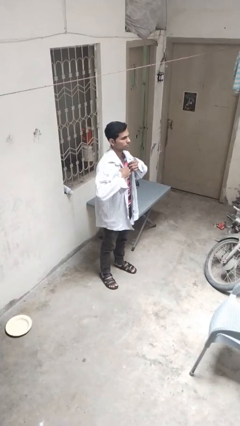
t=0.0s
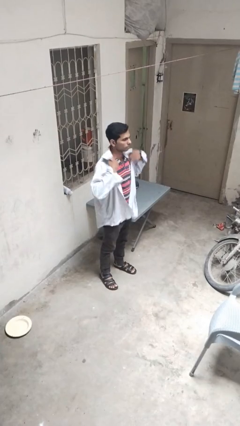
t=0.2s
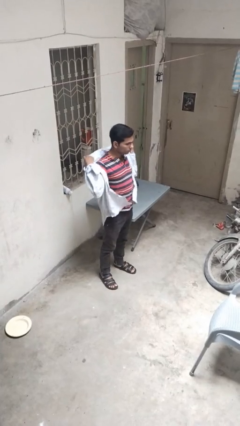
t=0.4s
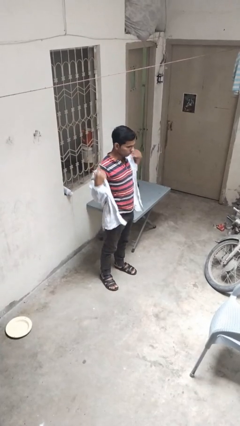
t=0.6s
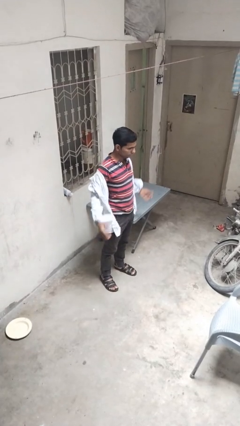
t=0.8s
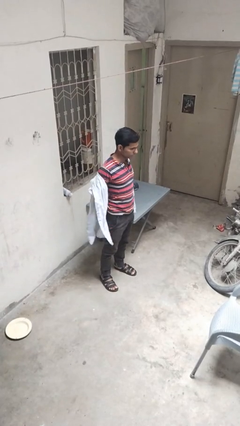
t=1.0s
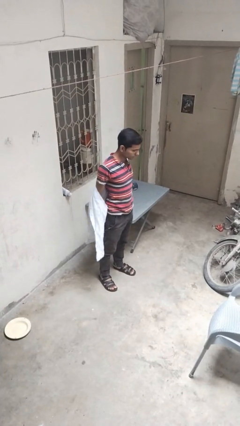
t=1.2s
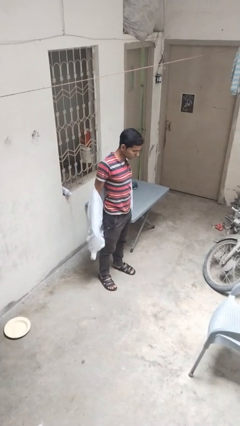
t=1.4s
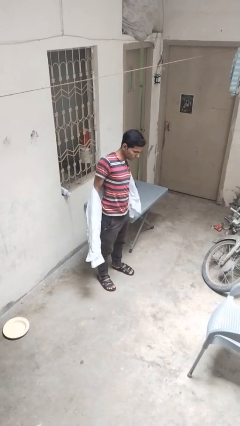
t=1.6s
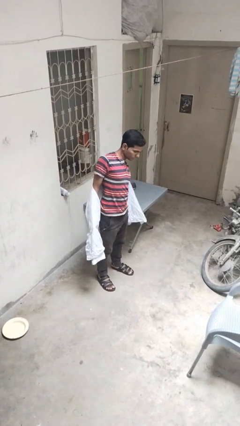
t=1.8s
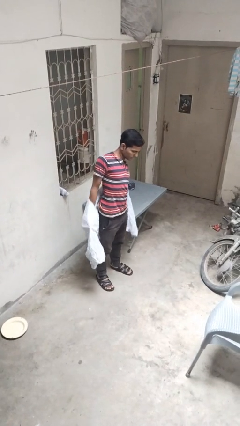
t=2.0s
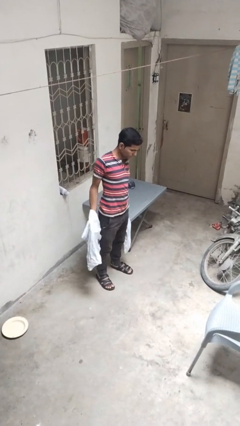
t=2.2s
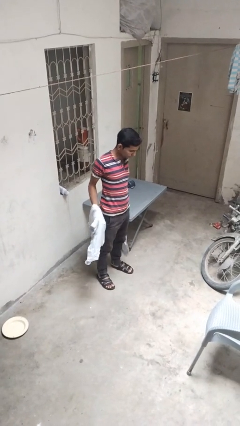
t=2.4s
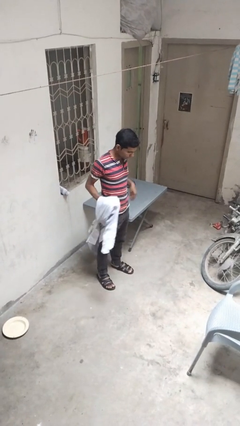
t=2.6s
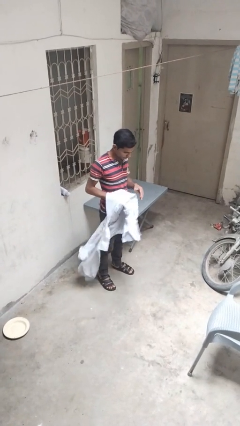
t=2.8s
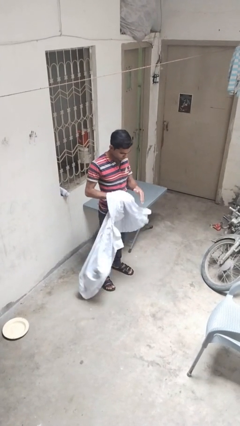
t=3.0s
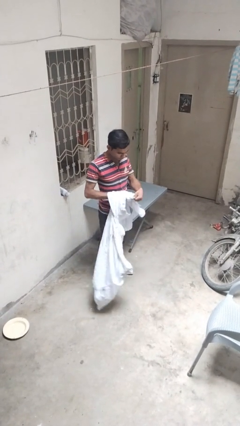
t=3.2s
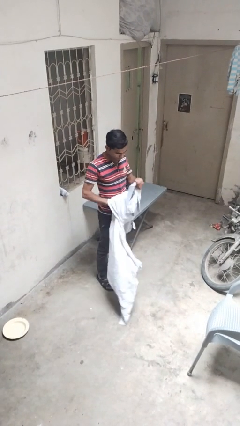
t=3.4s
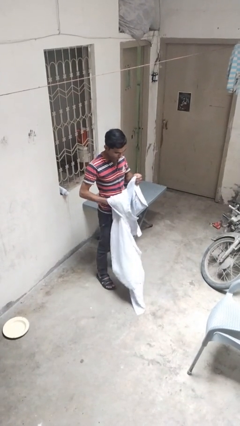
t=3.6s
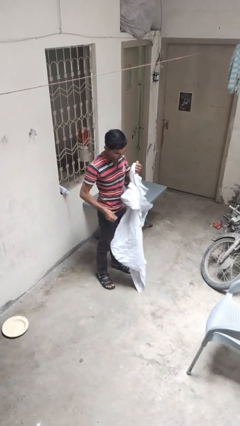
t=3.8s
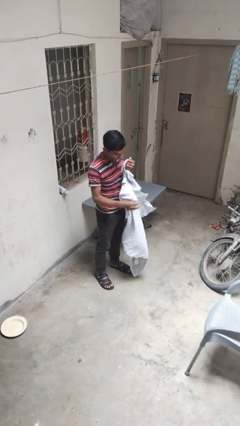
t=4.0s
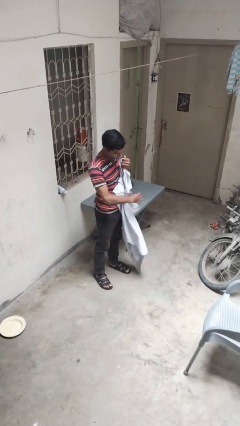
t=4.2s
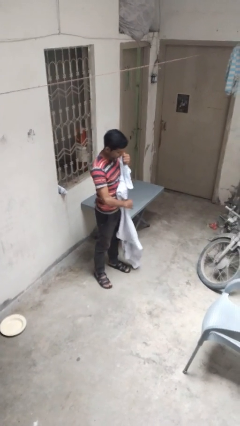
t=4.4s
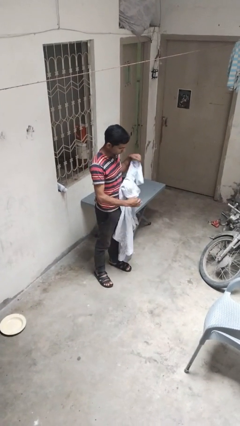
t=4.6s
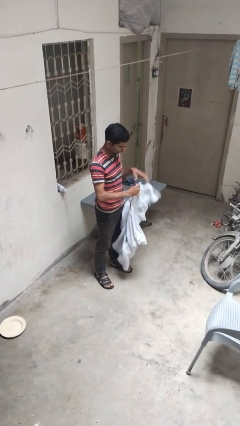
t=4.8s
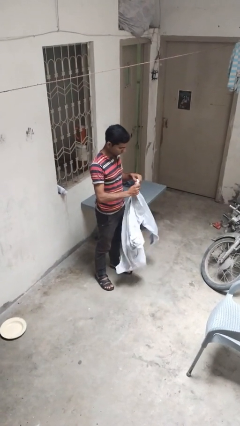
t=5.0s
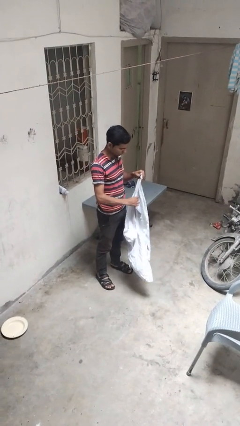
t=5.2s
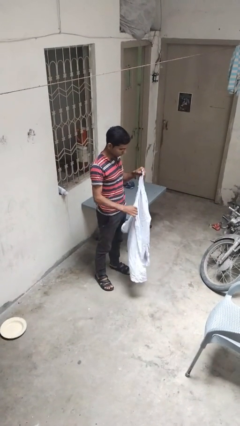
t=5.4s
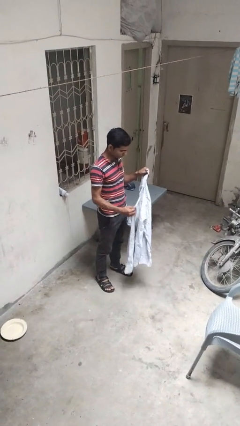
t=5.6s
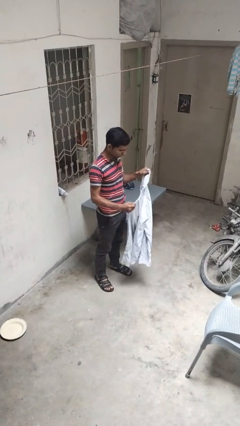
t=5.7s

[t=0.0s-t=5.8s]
person takes off shirt

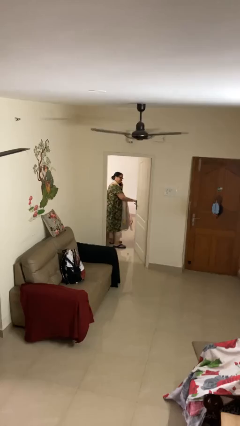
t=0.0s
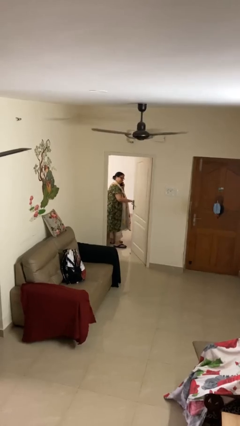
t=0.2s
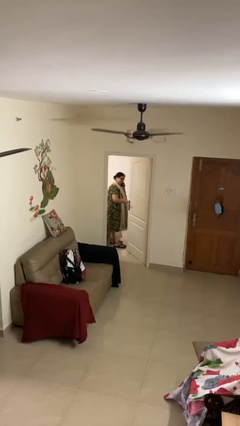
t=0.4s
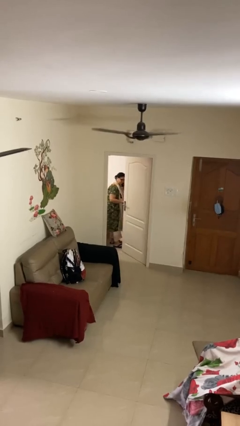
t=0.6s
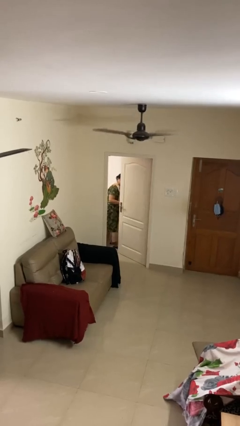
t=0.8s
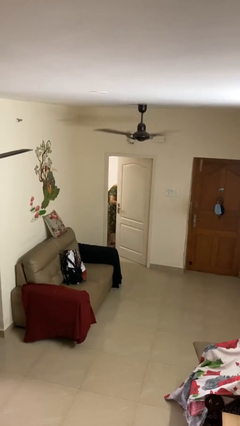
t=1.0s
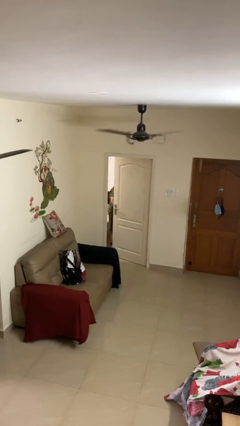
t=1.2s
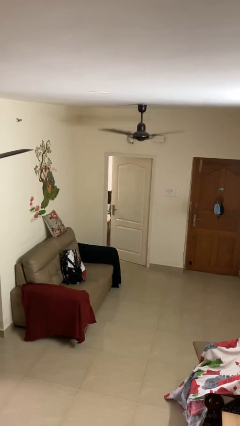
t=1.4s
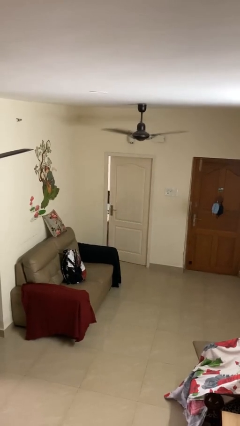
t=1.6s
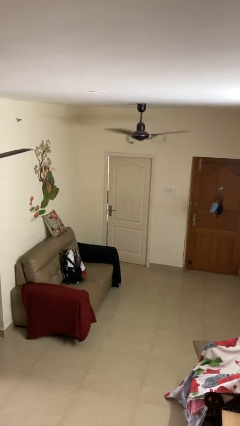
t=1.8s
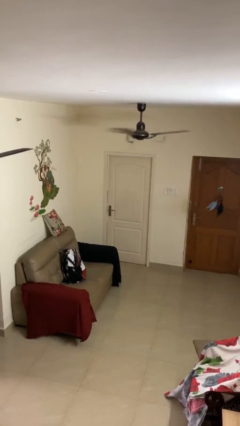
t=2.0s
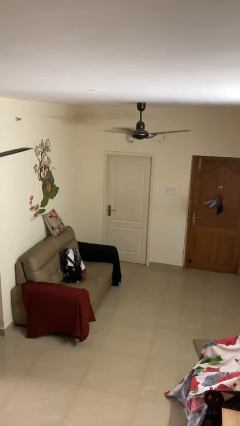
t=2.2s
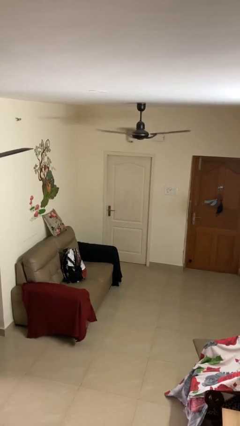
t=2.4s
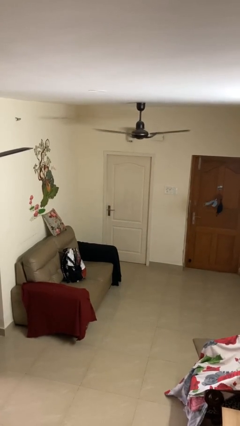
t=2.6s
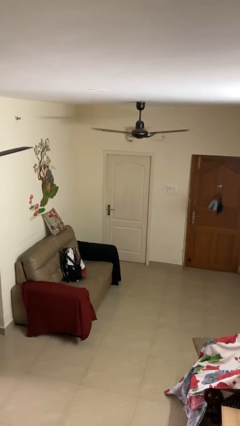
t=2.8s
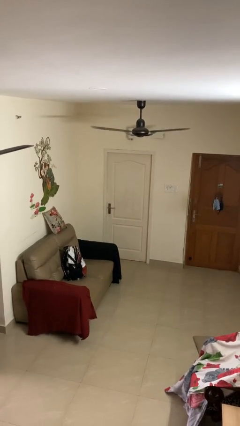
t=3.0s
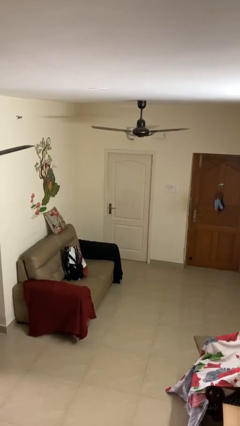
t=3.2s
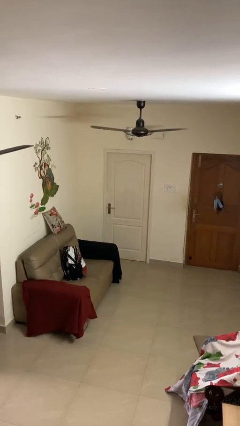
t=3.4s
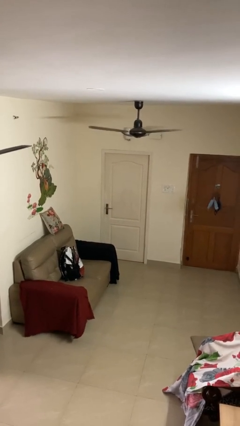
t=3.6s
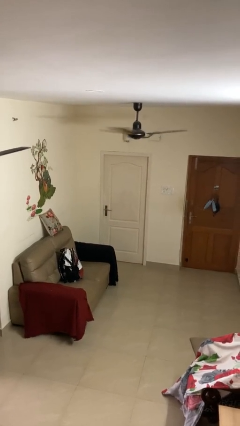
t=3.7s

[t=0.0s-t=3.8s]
person closes facility door

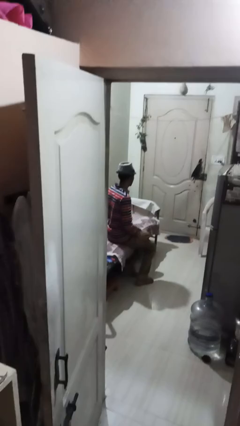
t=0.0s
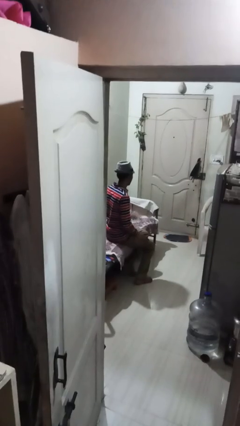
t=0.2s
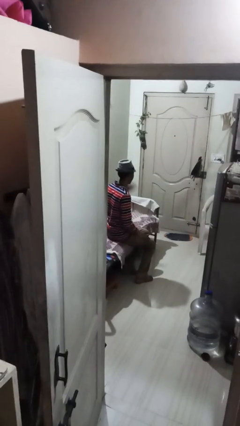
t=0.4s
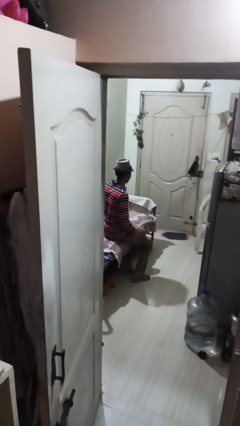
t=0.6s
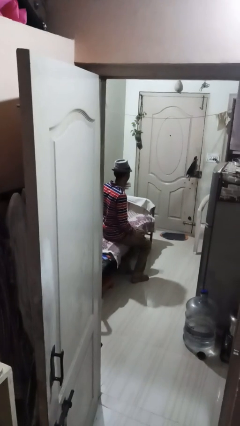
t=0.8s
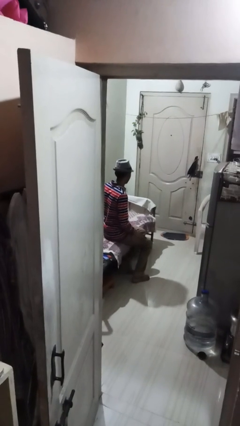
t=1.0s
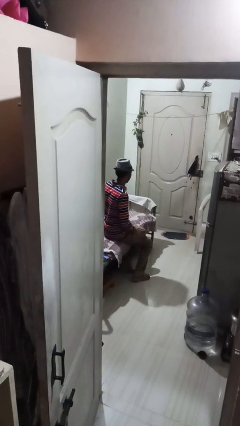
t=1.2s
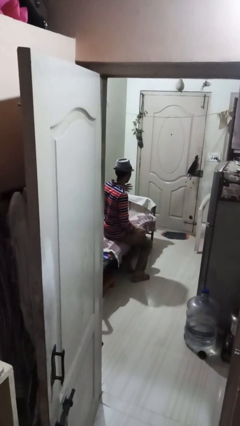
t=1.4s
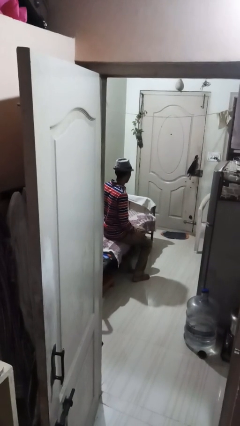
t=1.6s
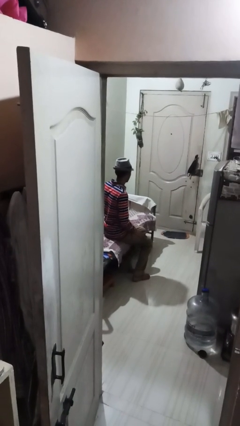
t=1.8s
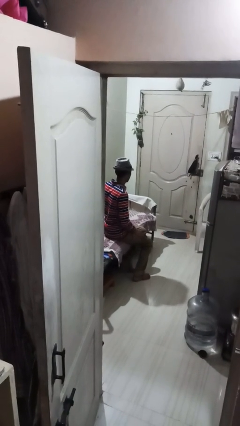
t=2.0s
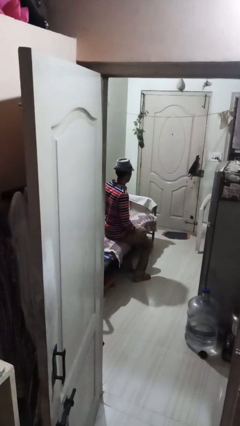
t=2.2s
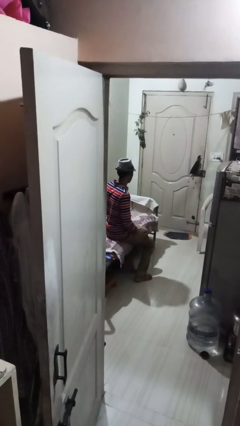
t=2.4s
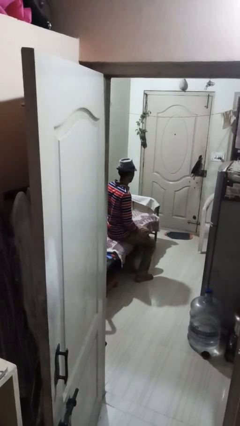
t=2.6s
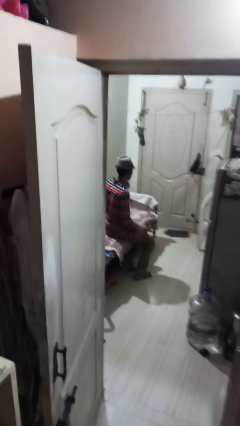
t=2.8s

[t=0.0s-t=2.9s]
person drums on chest

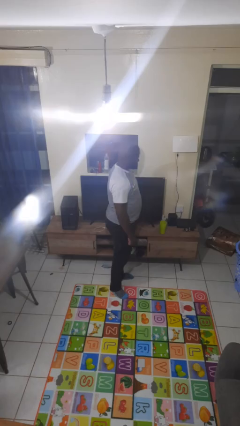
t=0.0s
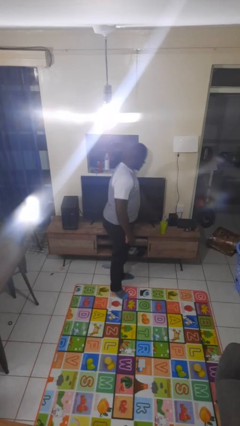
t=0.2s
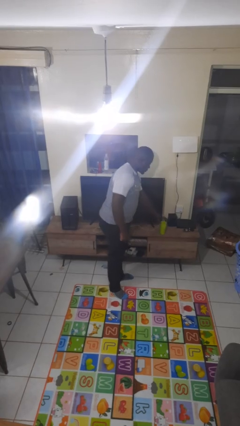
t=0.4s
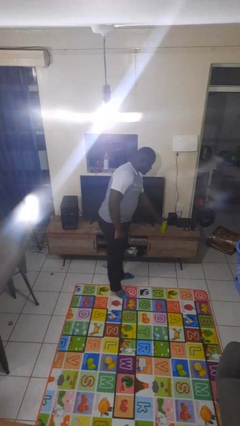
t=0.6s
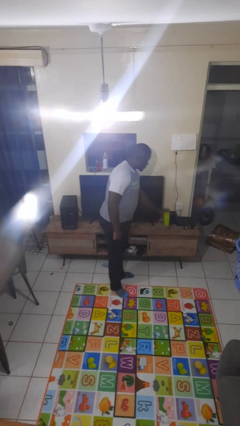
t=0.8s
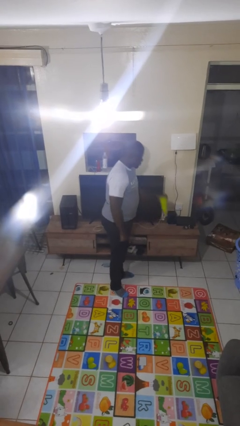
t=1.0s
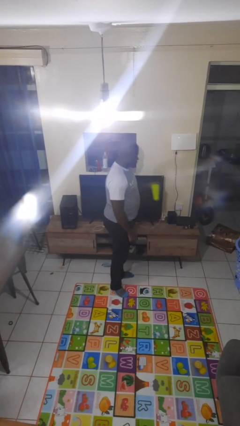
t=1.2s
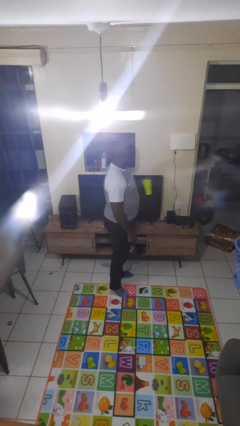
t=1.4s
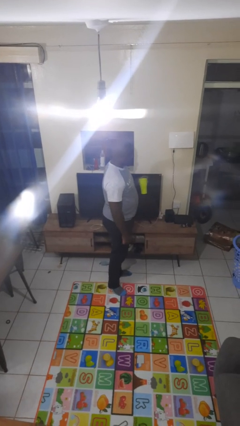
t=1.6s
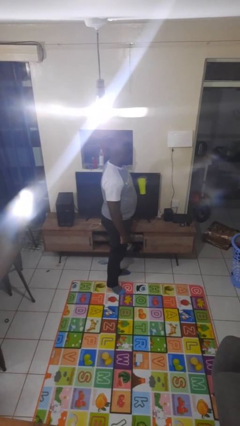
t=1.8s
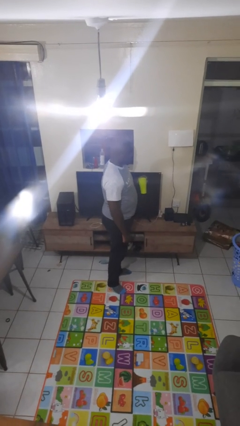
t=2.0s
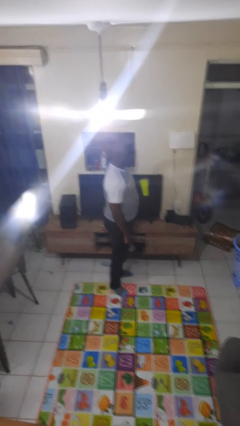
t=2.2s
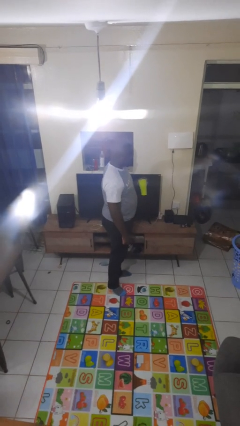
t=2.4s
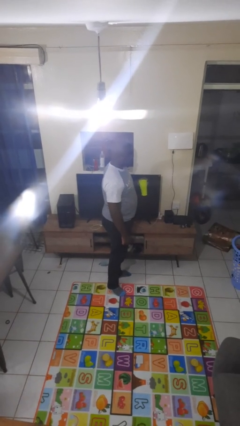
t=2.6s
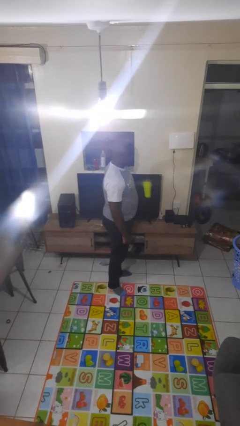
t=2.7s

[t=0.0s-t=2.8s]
person picks up object from countertop

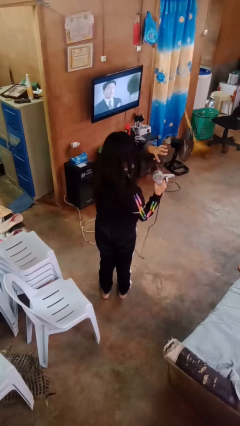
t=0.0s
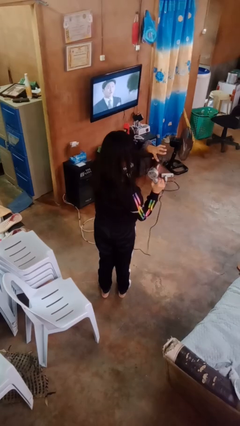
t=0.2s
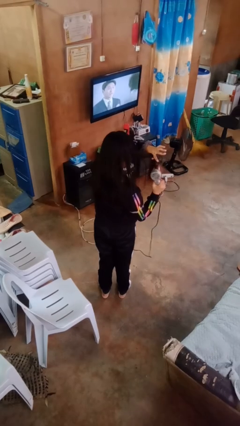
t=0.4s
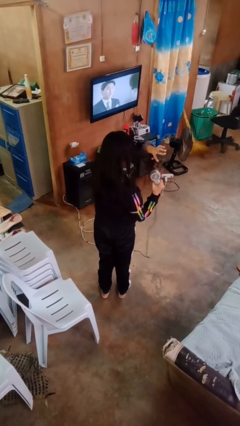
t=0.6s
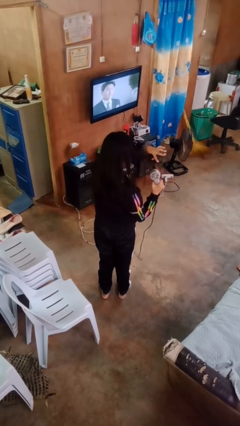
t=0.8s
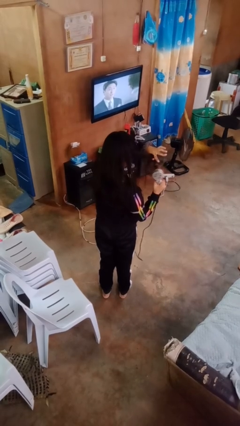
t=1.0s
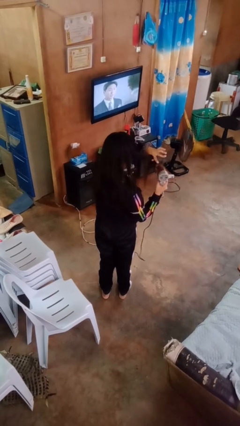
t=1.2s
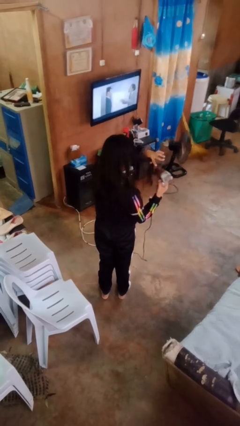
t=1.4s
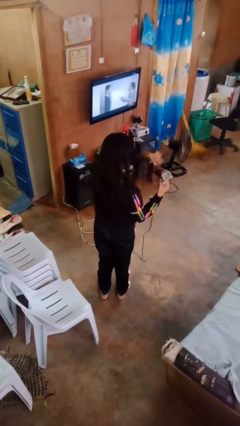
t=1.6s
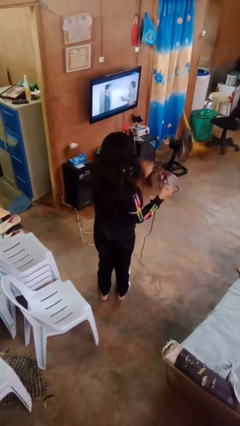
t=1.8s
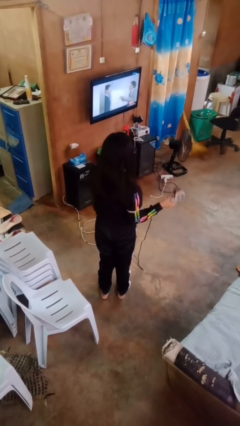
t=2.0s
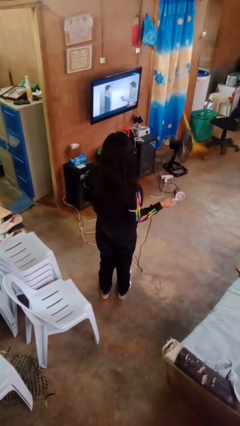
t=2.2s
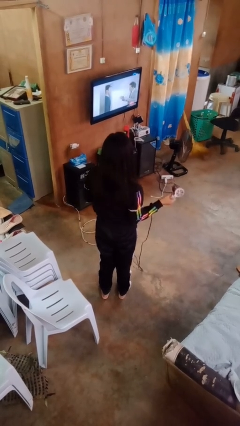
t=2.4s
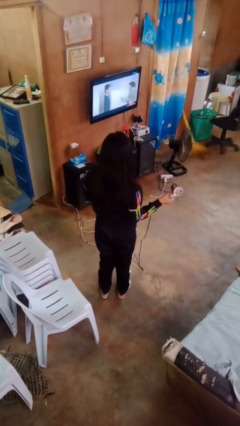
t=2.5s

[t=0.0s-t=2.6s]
person dries hair with hairdryer
